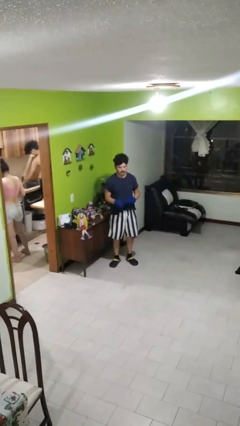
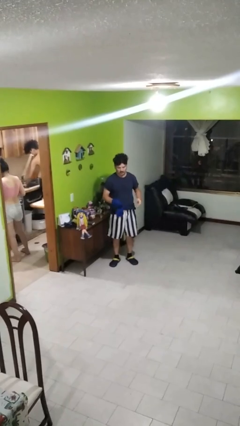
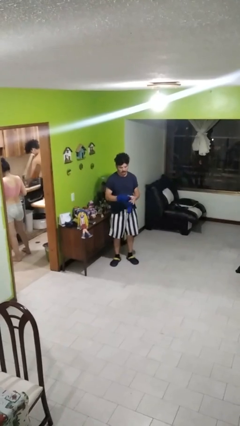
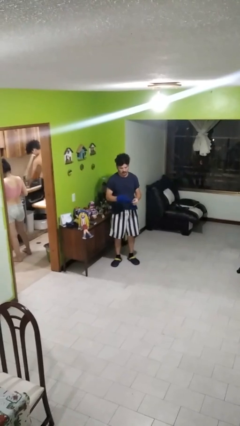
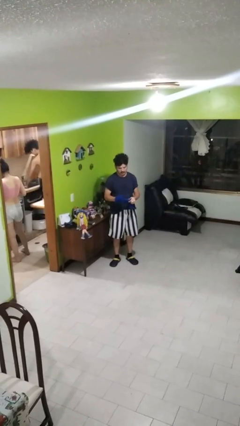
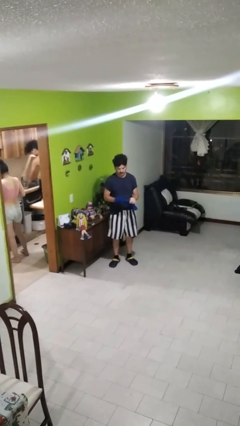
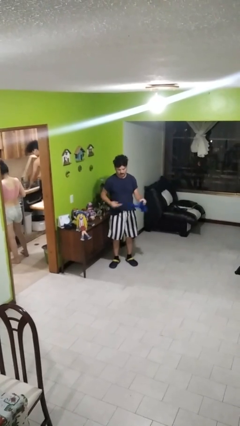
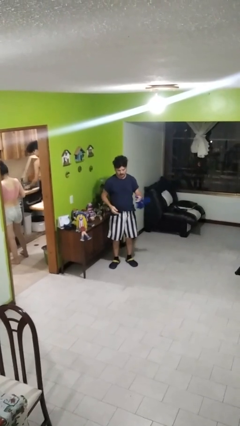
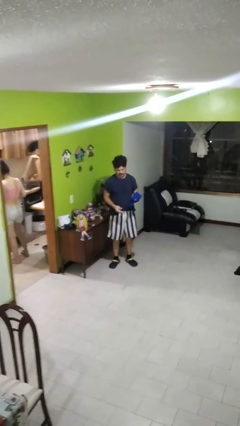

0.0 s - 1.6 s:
person takes off gloves

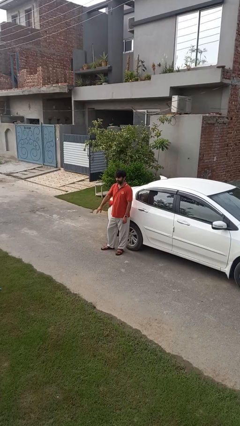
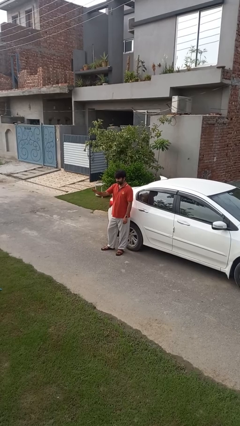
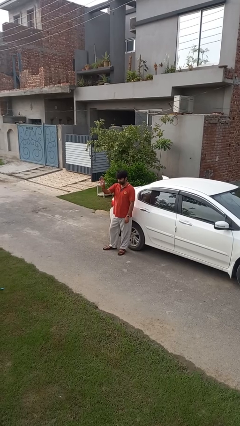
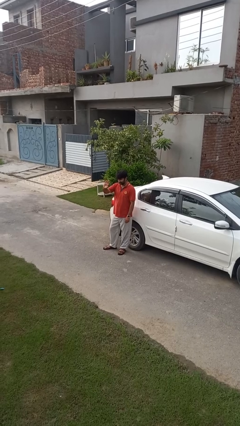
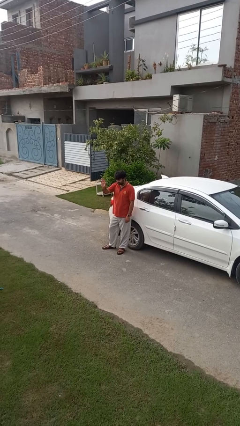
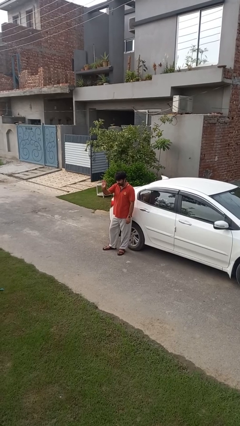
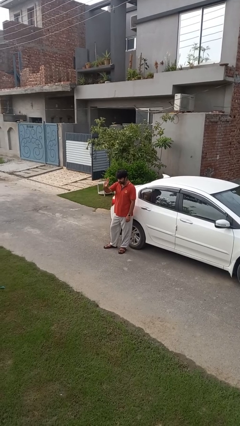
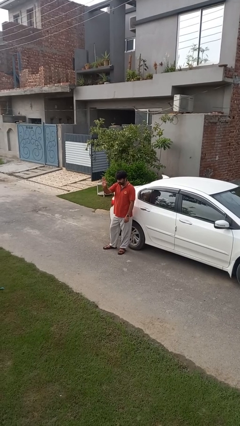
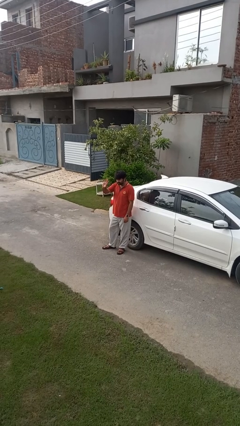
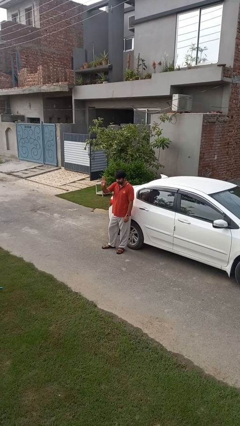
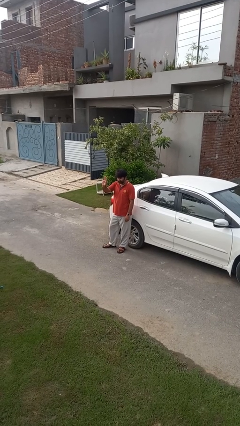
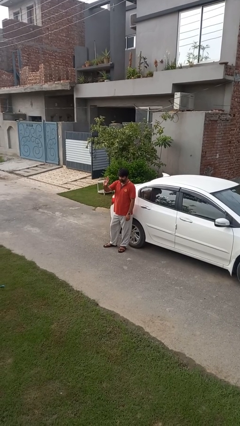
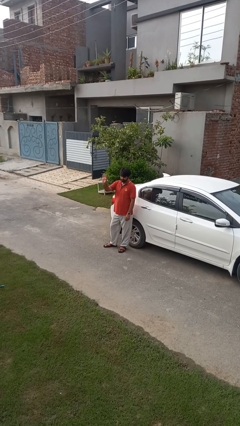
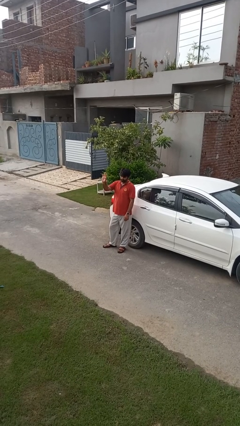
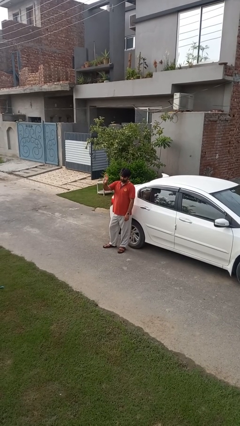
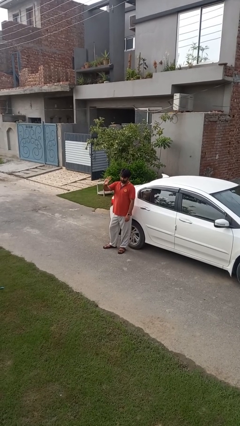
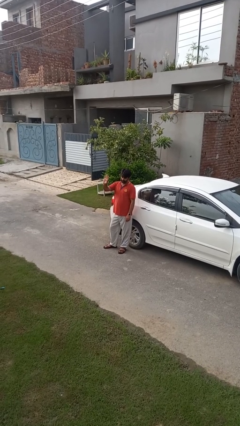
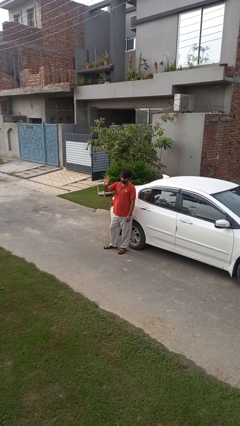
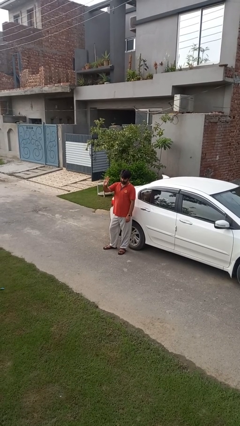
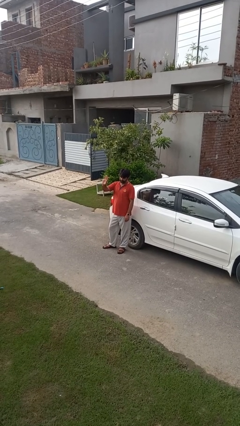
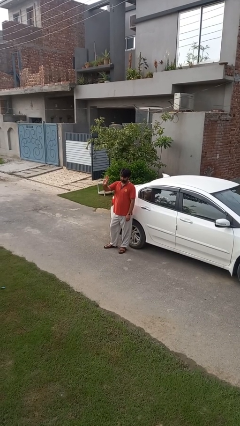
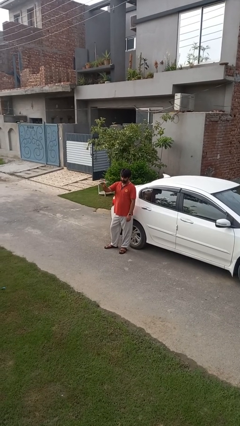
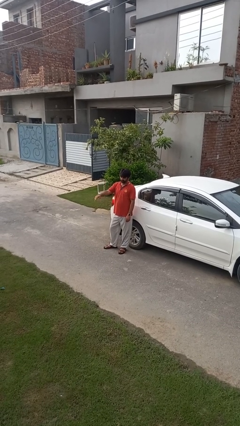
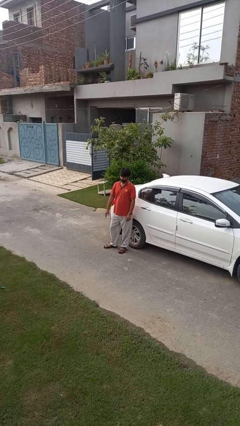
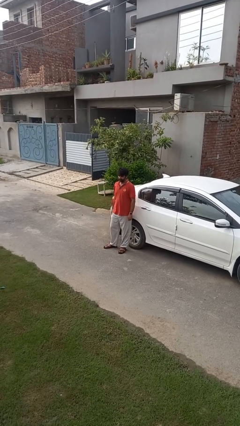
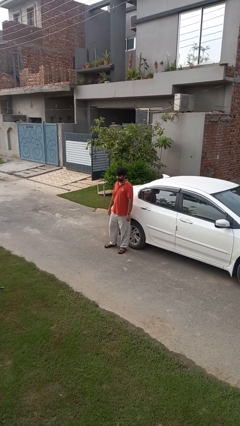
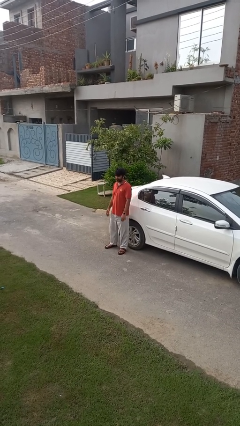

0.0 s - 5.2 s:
person waves at person

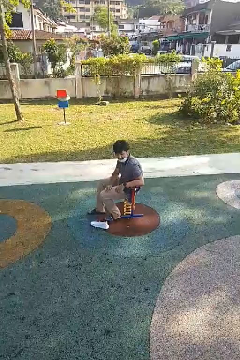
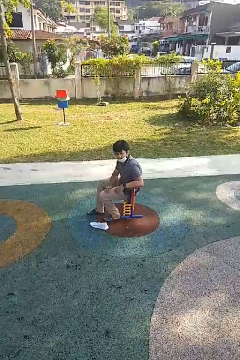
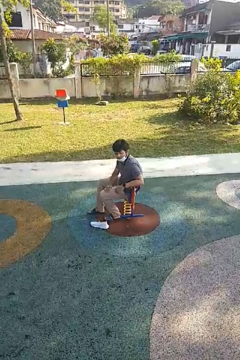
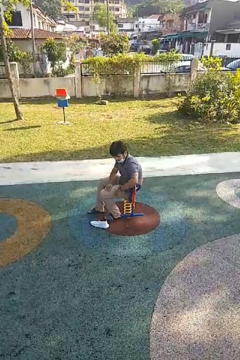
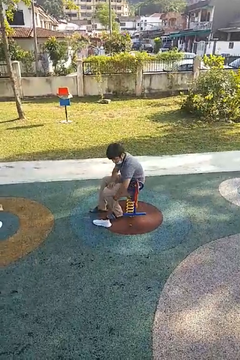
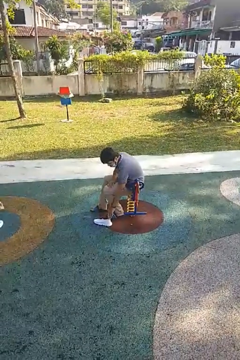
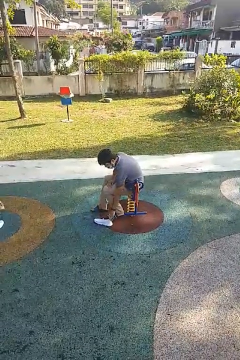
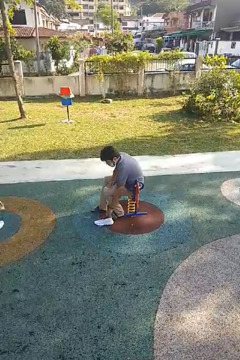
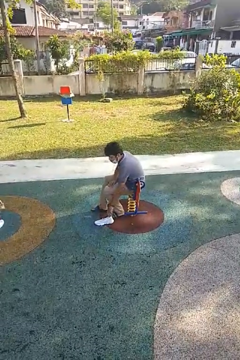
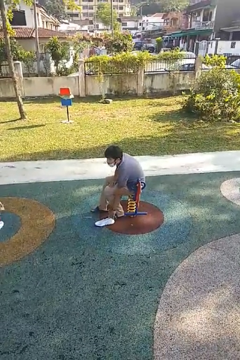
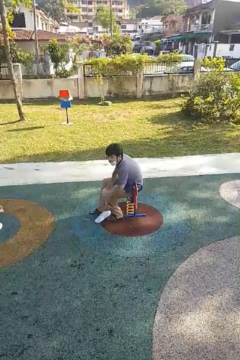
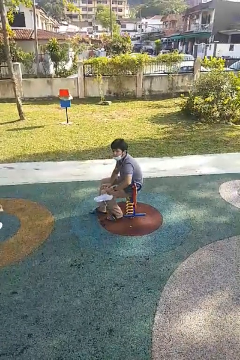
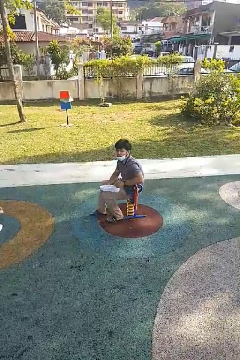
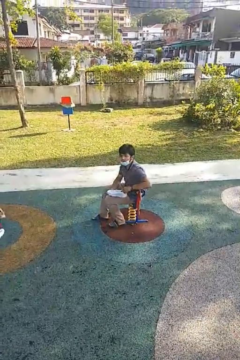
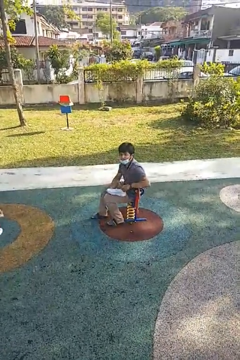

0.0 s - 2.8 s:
person picks up object from floor

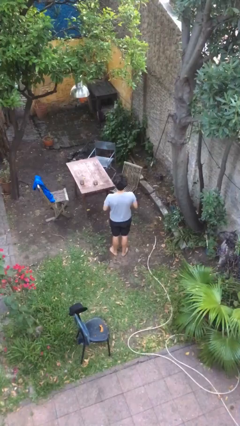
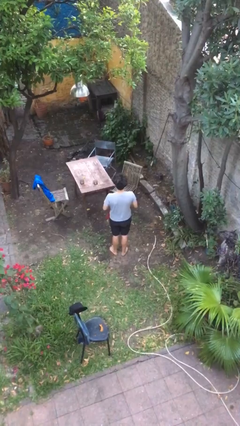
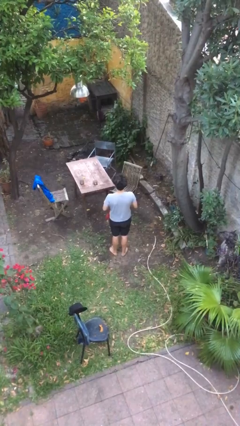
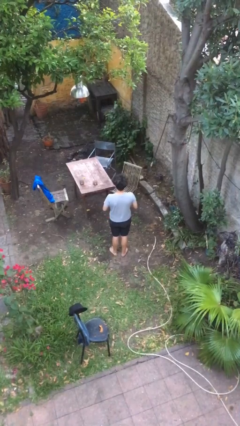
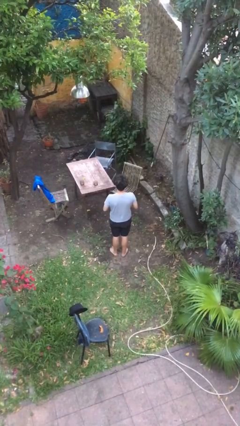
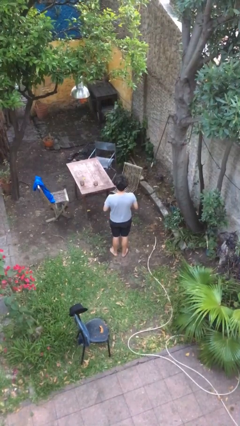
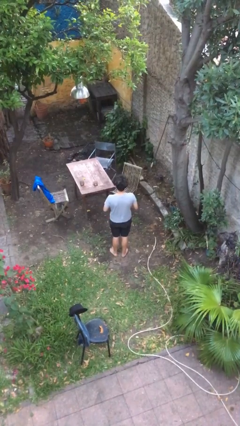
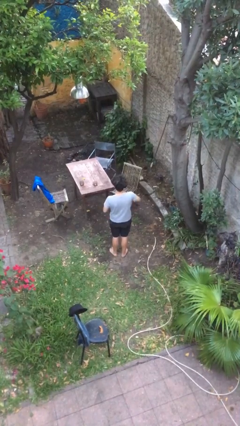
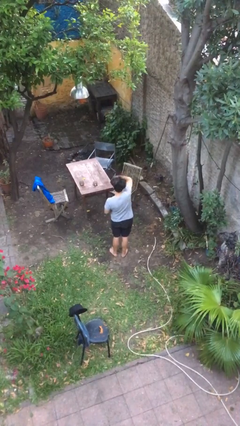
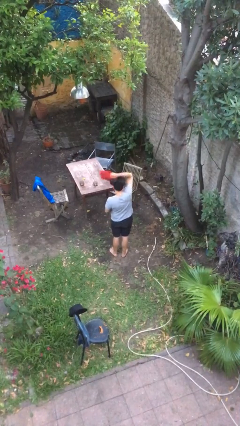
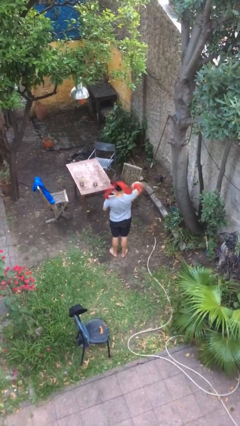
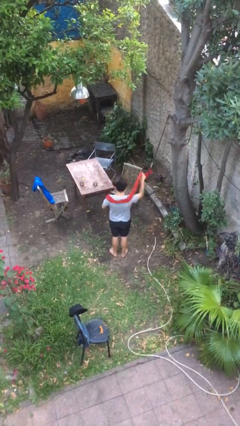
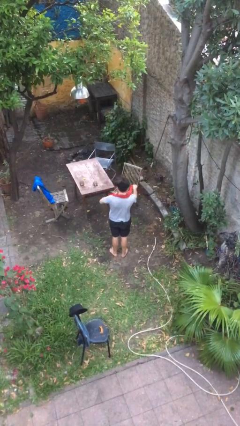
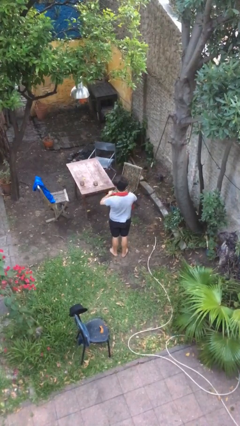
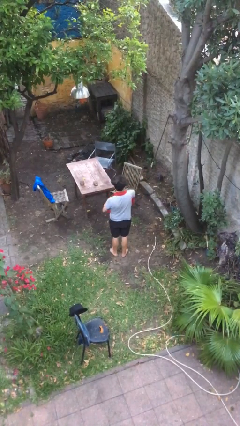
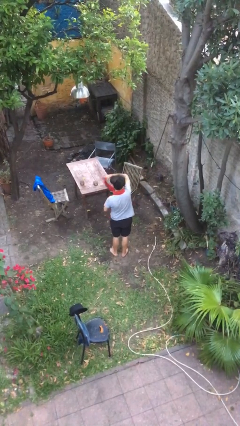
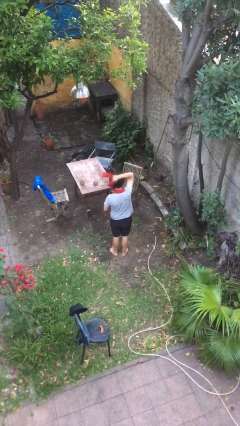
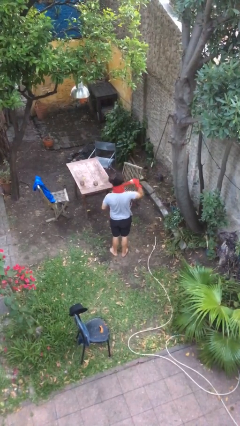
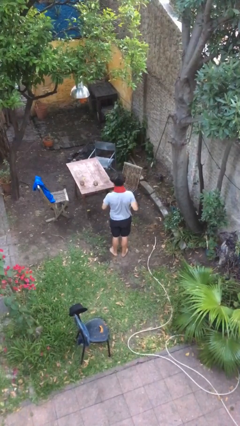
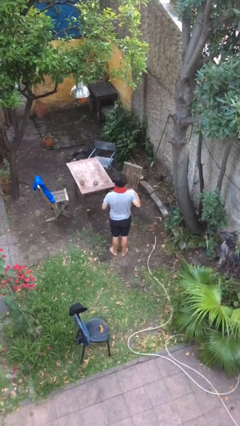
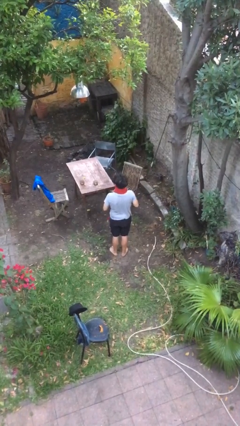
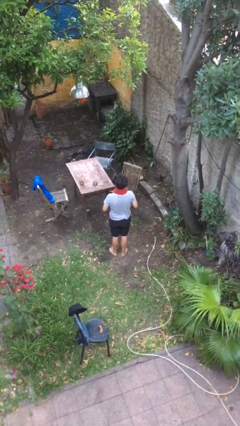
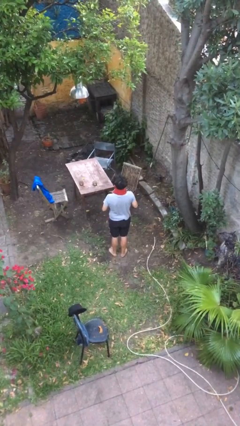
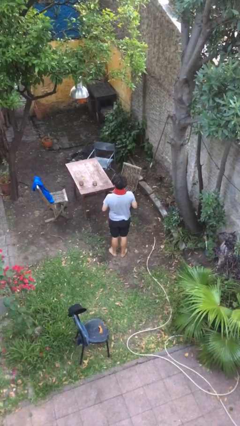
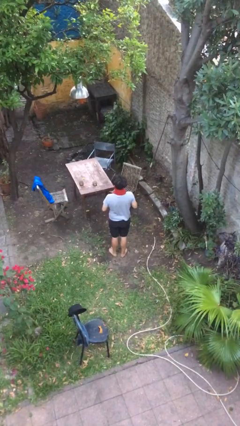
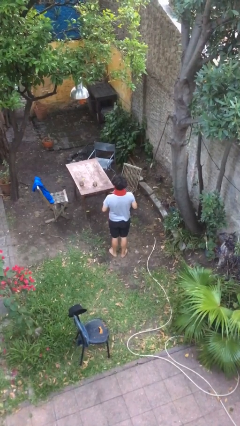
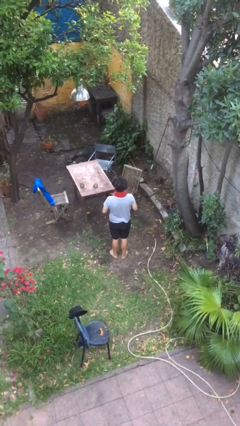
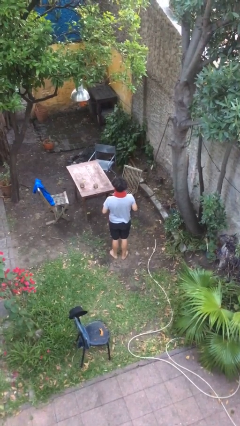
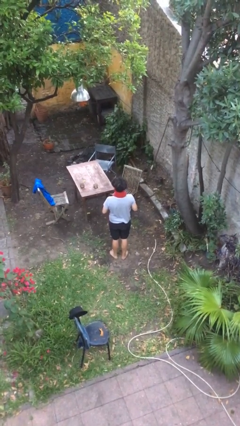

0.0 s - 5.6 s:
person puts on scarf

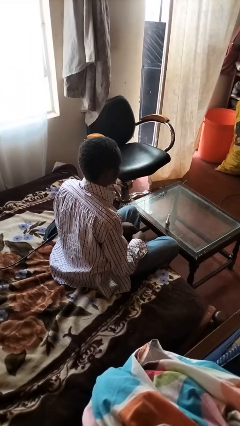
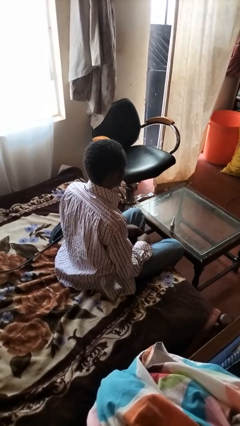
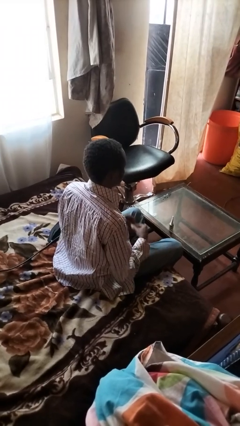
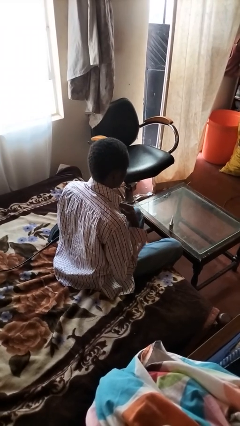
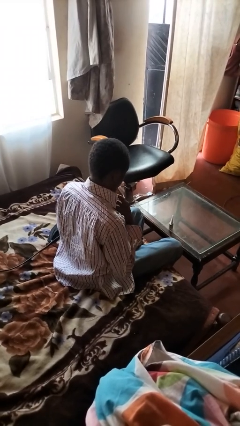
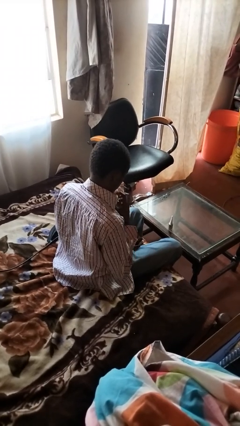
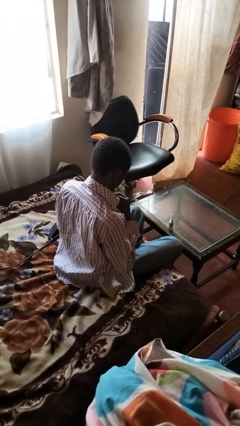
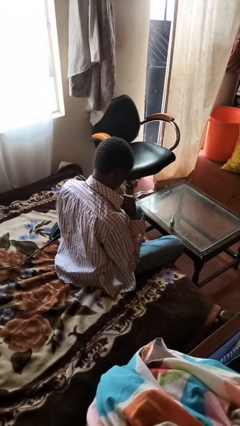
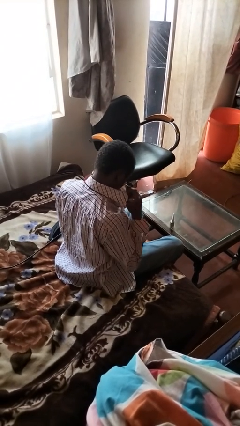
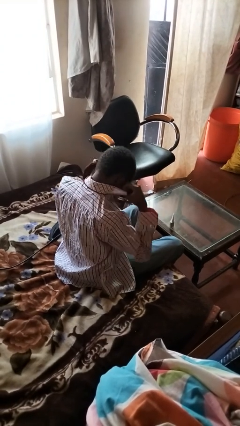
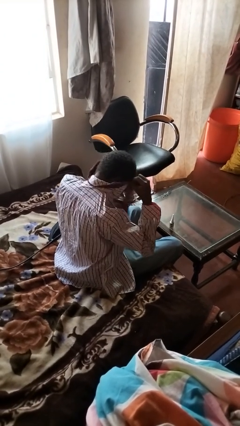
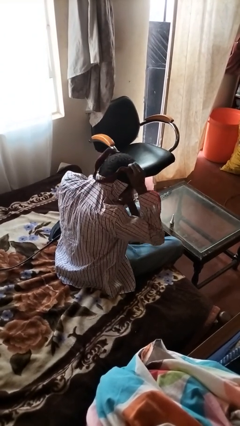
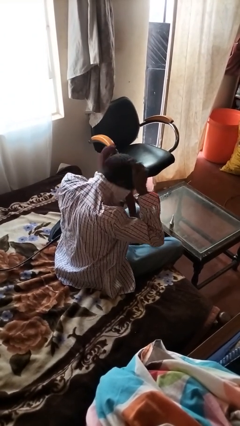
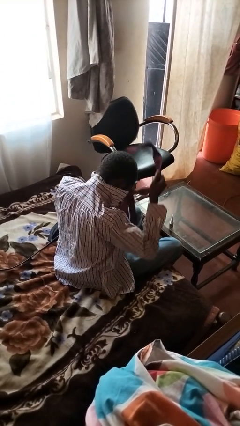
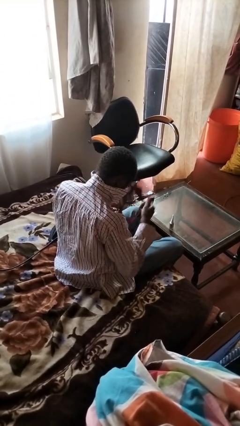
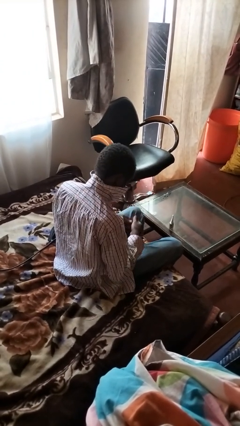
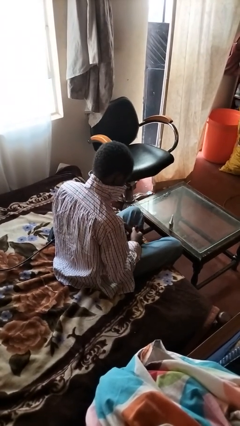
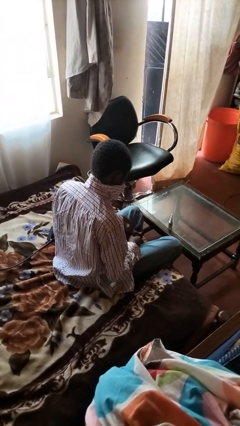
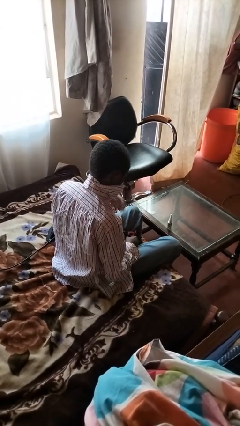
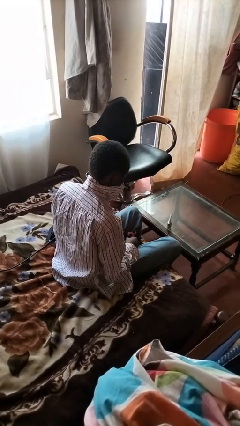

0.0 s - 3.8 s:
person takes off necktie
